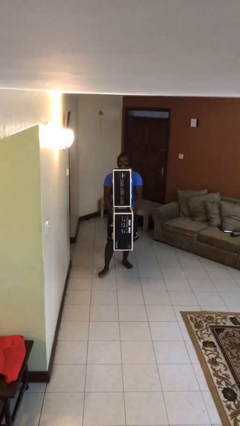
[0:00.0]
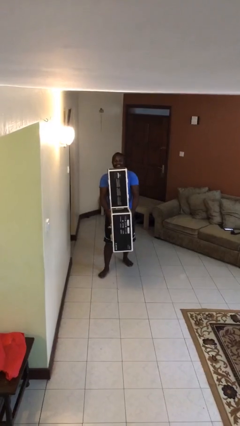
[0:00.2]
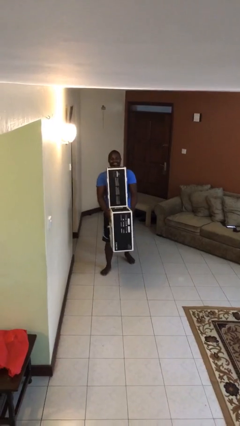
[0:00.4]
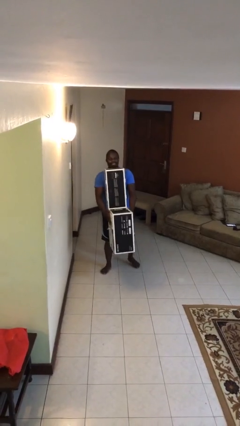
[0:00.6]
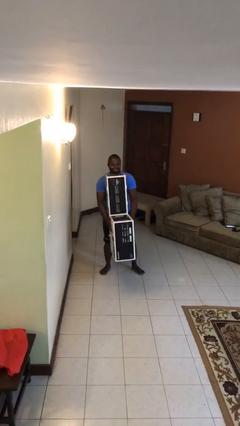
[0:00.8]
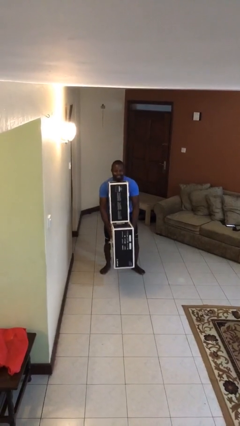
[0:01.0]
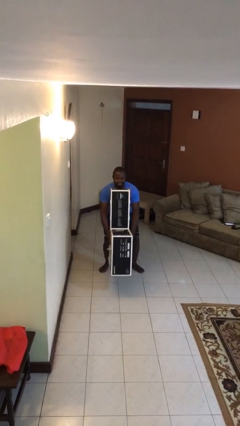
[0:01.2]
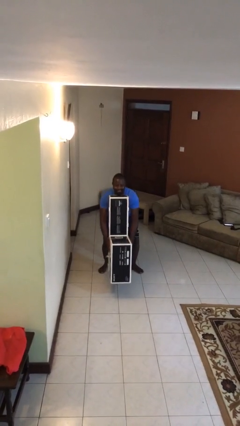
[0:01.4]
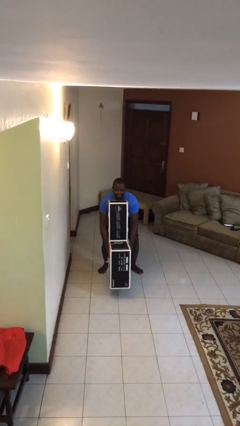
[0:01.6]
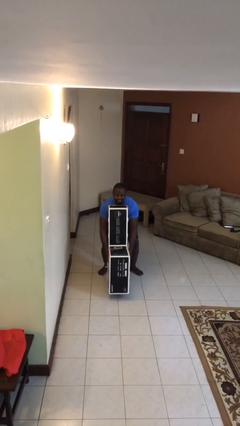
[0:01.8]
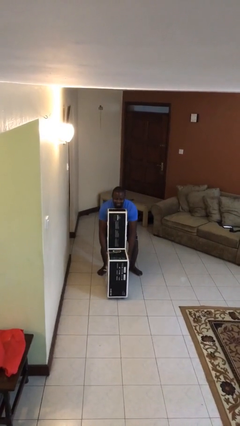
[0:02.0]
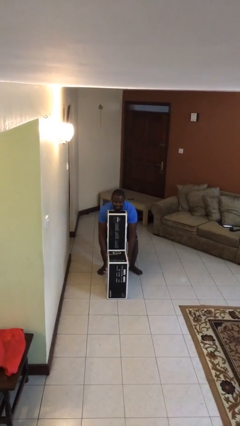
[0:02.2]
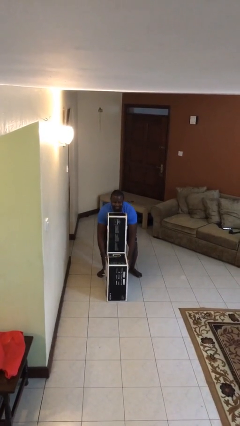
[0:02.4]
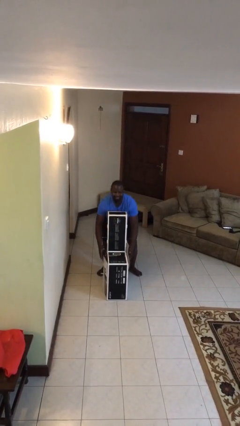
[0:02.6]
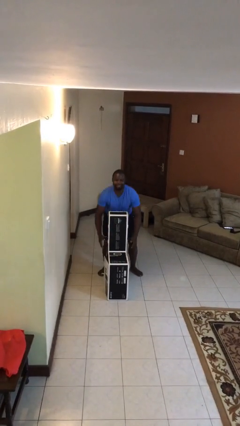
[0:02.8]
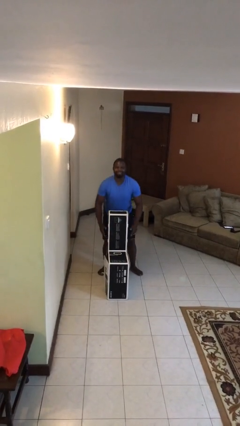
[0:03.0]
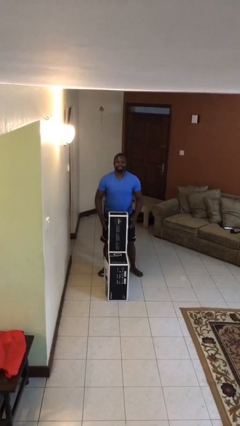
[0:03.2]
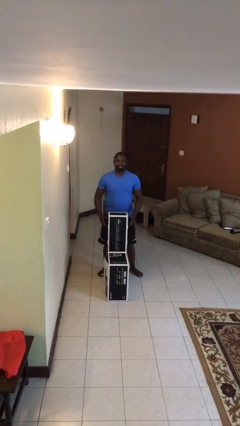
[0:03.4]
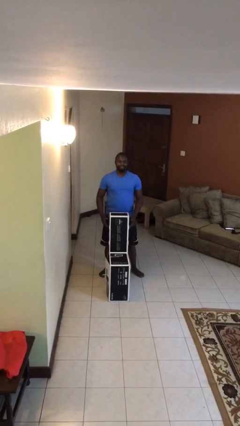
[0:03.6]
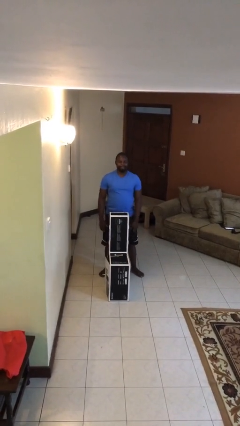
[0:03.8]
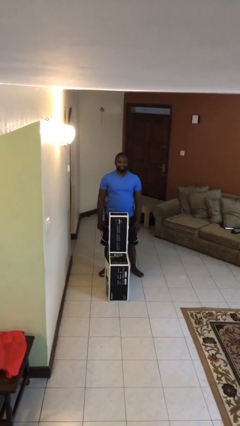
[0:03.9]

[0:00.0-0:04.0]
person puts down object on floor

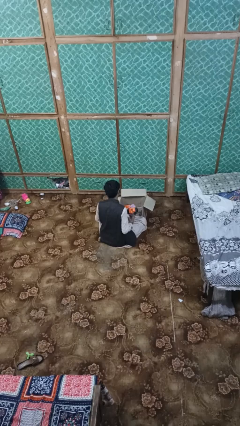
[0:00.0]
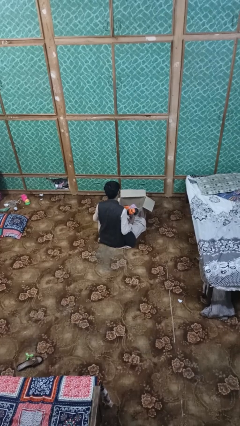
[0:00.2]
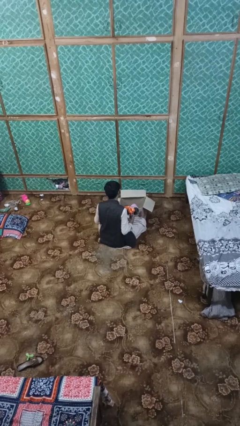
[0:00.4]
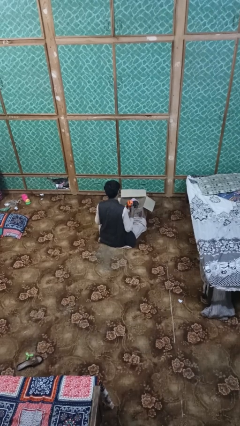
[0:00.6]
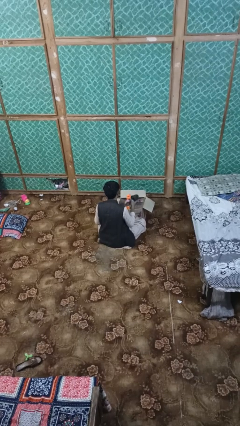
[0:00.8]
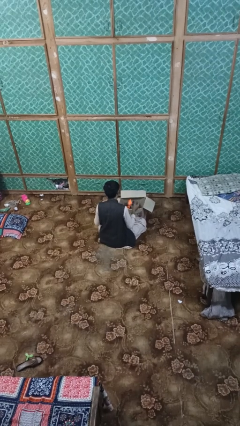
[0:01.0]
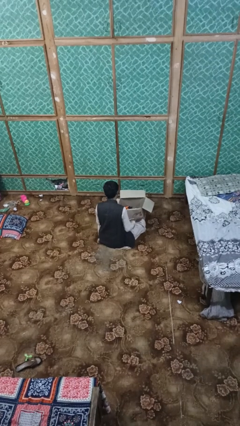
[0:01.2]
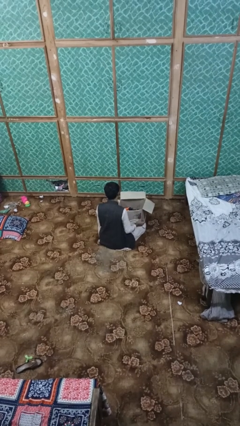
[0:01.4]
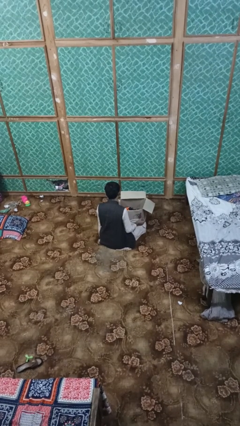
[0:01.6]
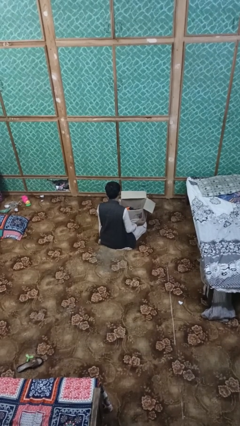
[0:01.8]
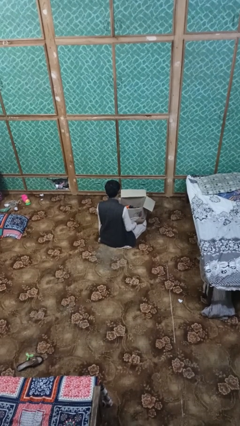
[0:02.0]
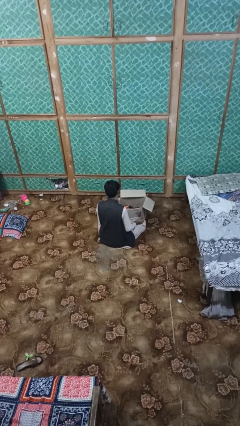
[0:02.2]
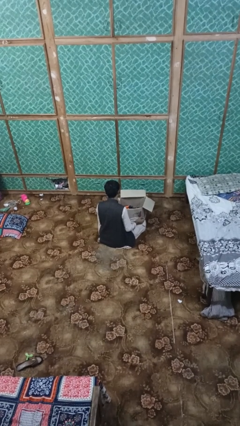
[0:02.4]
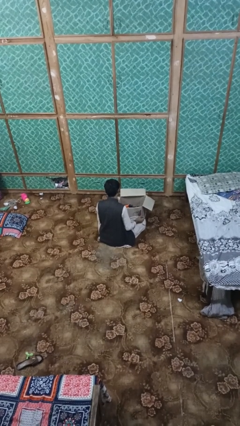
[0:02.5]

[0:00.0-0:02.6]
person puts object into box

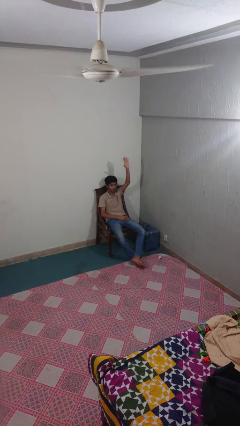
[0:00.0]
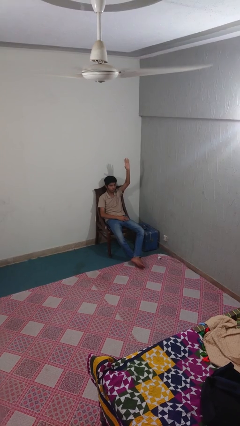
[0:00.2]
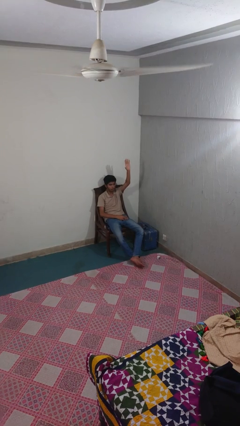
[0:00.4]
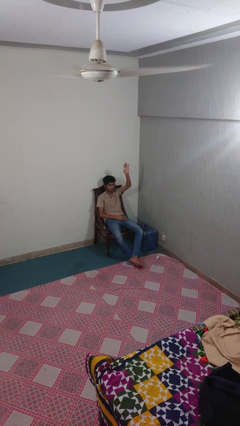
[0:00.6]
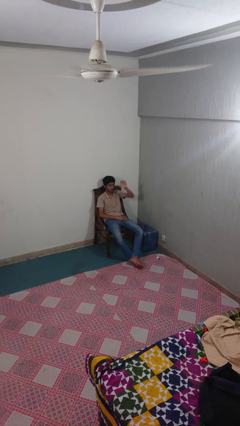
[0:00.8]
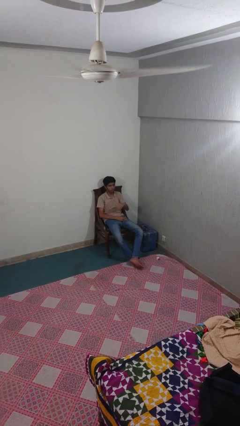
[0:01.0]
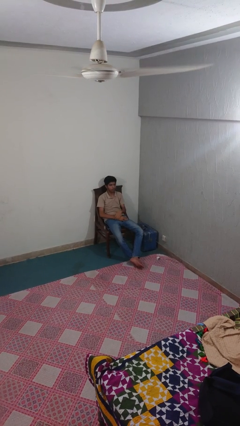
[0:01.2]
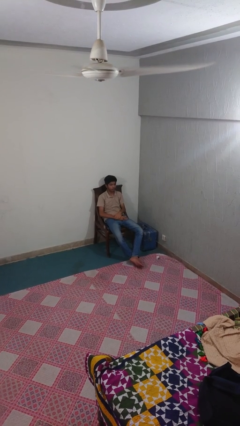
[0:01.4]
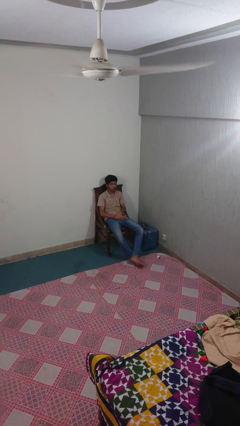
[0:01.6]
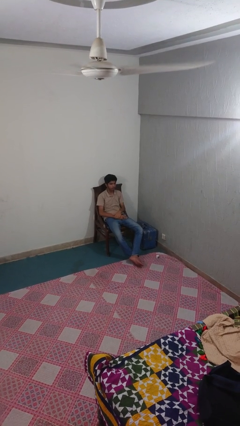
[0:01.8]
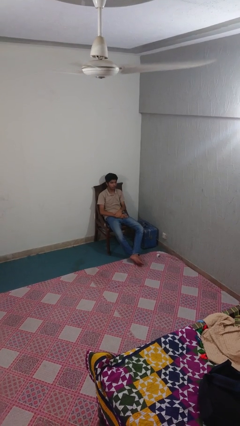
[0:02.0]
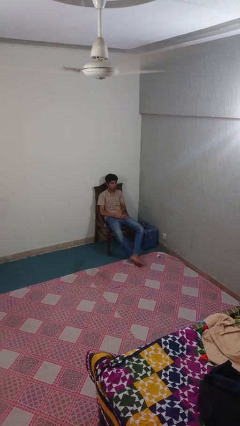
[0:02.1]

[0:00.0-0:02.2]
person gestures lower hand

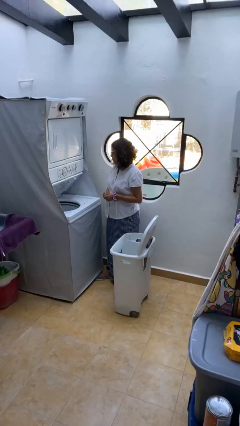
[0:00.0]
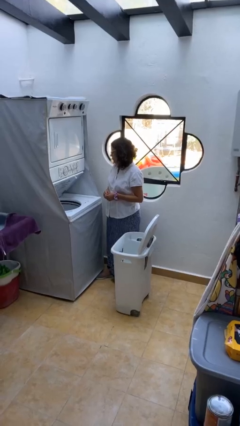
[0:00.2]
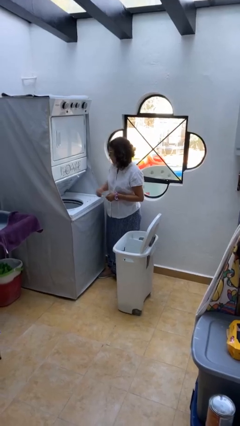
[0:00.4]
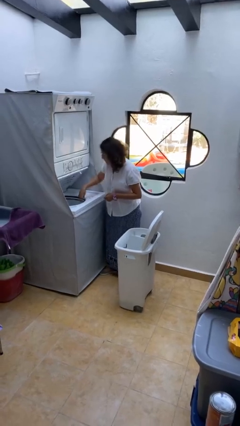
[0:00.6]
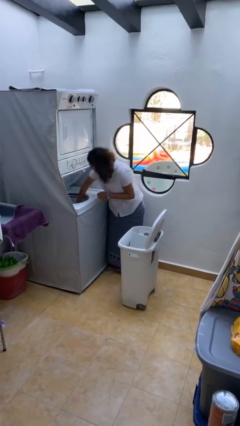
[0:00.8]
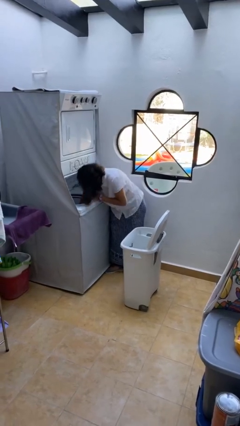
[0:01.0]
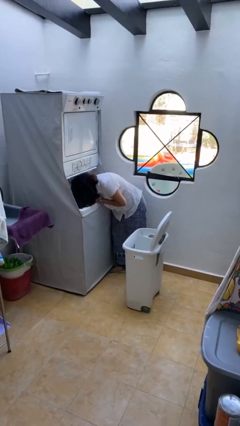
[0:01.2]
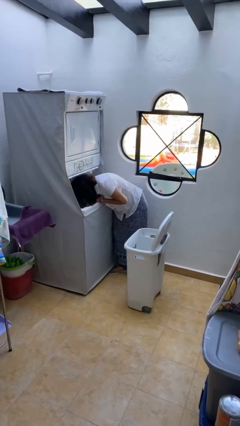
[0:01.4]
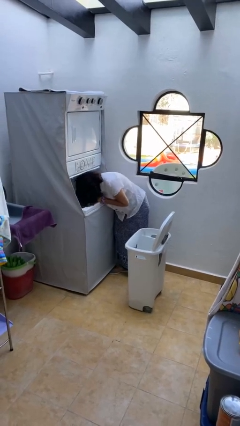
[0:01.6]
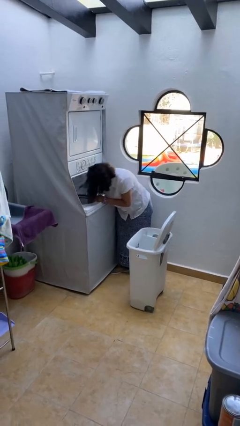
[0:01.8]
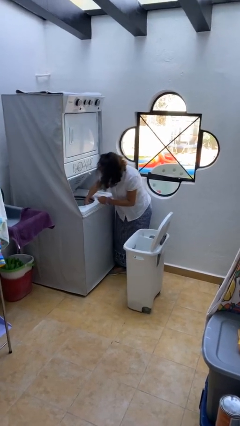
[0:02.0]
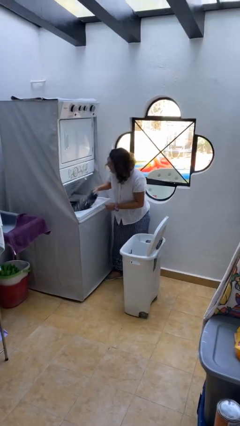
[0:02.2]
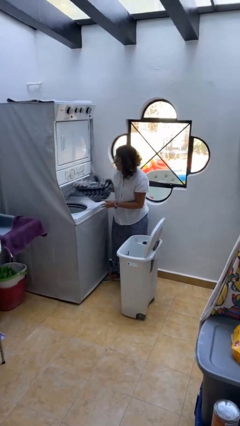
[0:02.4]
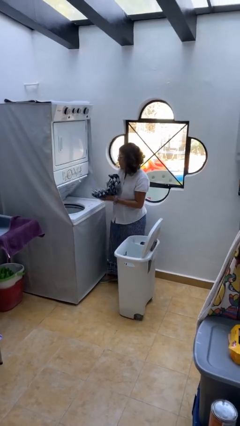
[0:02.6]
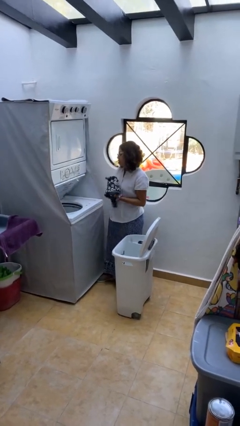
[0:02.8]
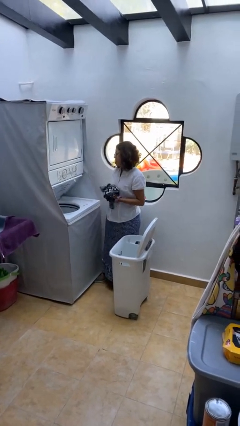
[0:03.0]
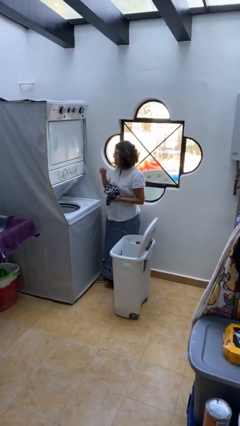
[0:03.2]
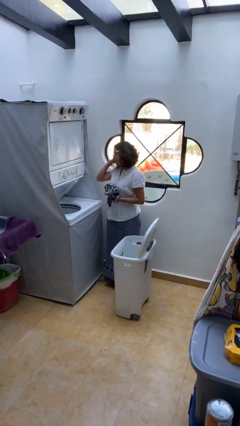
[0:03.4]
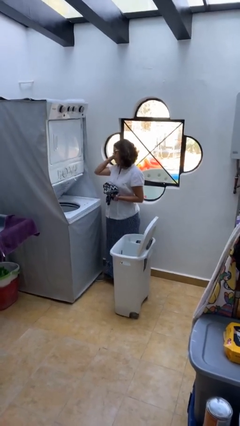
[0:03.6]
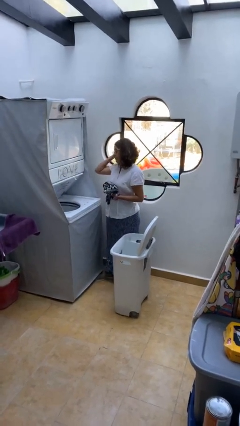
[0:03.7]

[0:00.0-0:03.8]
person loads clotheswasher

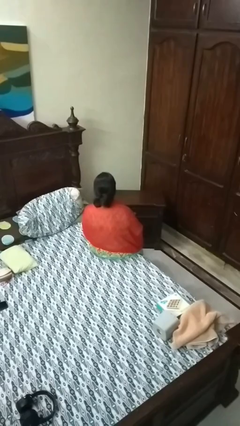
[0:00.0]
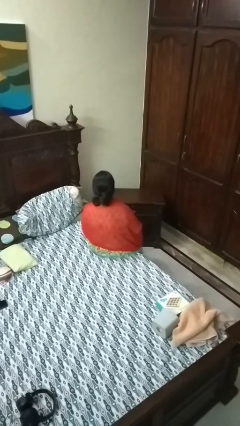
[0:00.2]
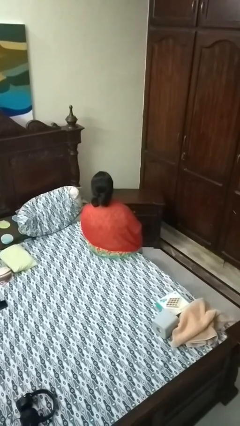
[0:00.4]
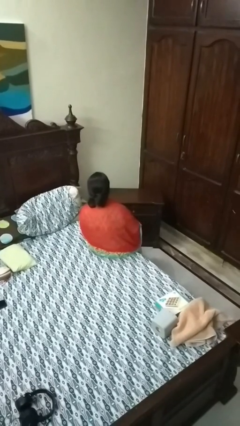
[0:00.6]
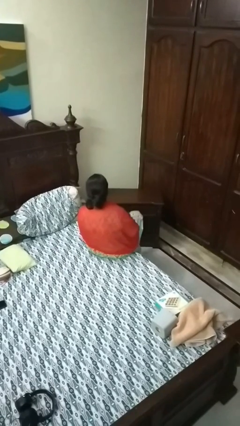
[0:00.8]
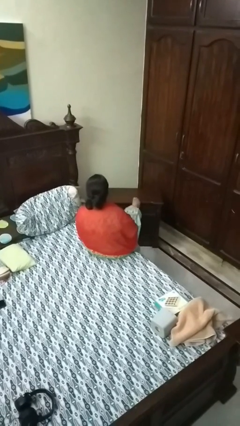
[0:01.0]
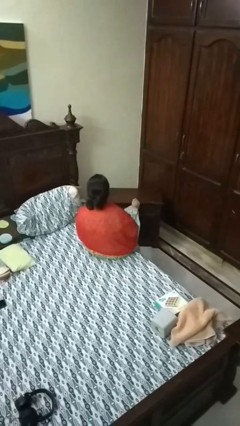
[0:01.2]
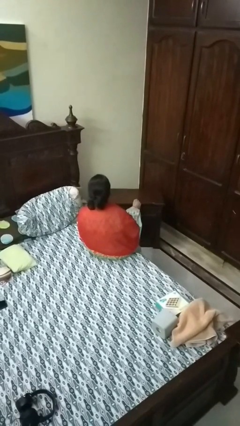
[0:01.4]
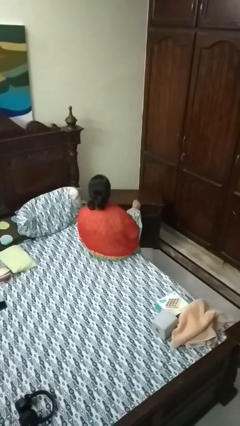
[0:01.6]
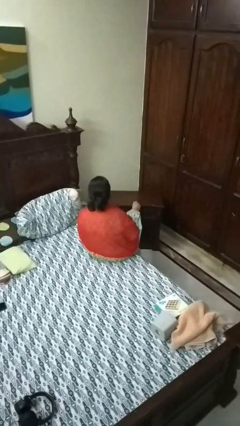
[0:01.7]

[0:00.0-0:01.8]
person puts feet up

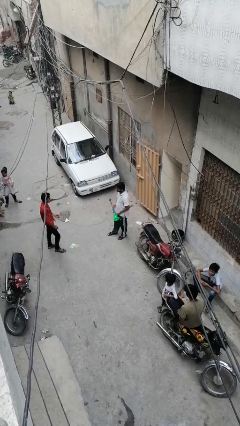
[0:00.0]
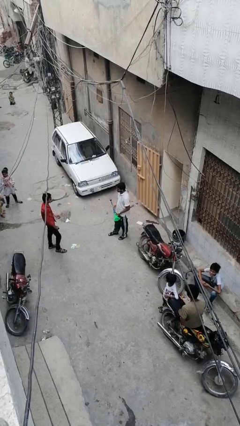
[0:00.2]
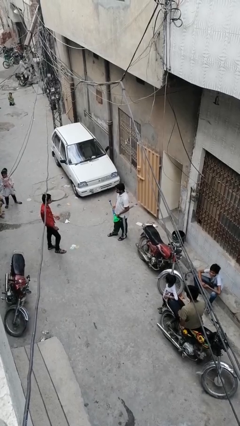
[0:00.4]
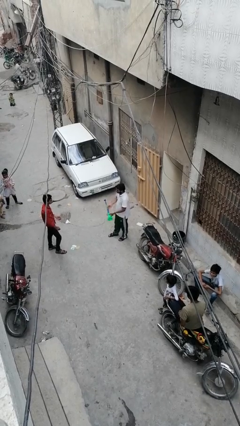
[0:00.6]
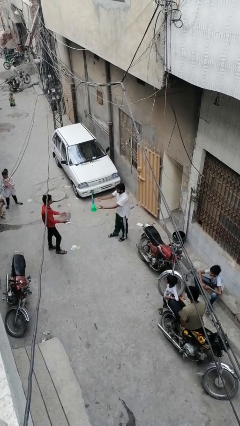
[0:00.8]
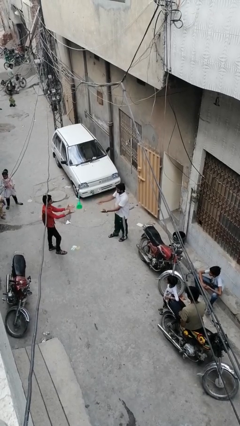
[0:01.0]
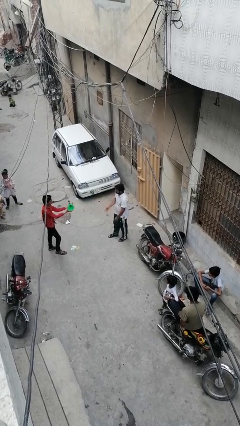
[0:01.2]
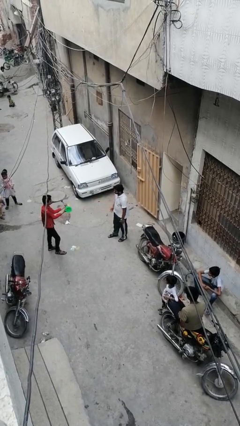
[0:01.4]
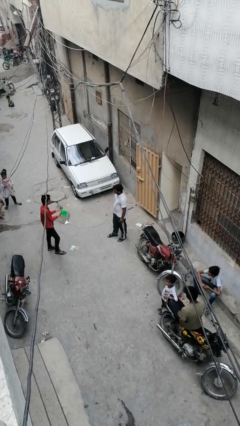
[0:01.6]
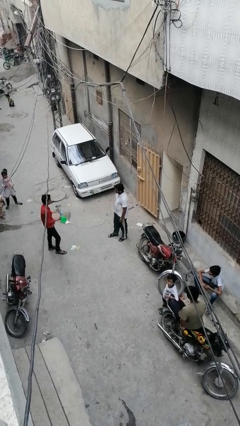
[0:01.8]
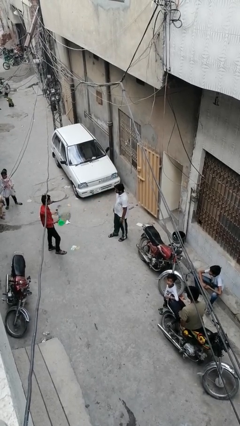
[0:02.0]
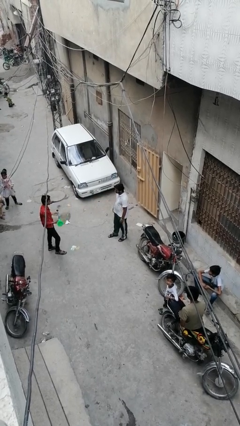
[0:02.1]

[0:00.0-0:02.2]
person throws object to person

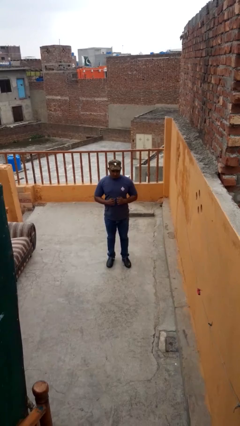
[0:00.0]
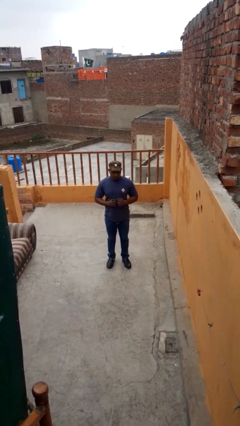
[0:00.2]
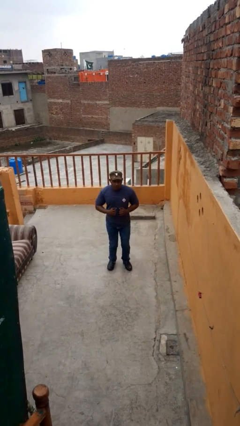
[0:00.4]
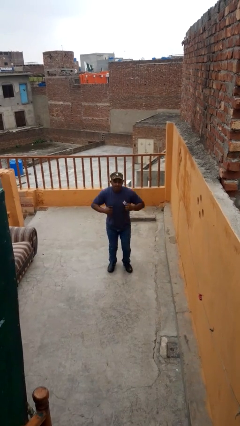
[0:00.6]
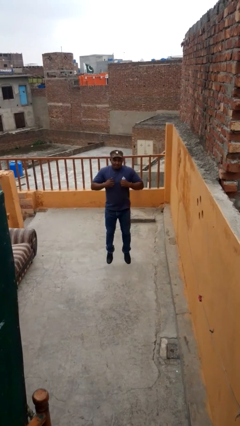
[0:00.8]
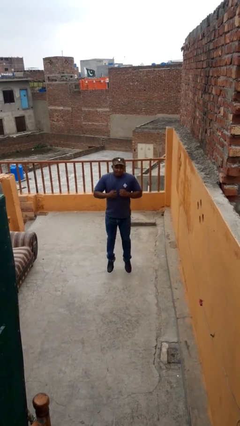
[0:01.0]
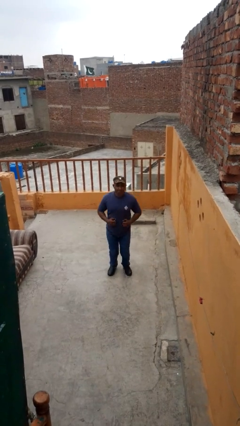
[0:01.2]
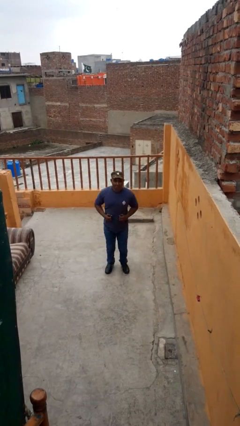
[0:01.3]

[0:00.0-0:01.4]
person jumps
